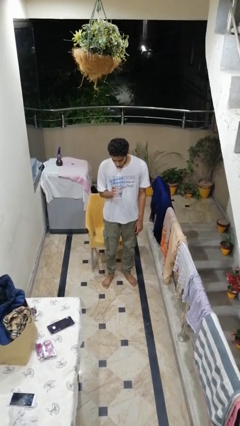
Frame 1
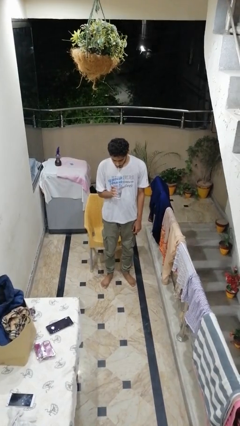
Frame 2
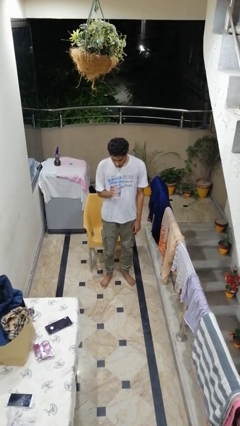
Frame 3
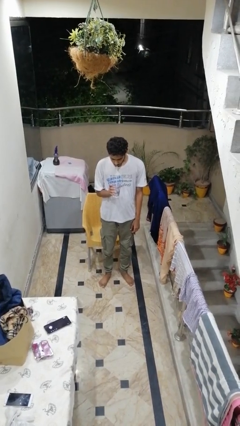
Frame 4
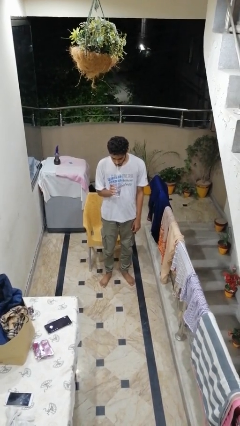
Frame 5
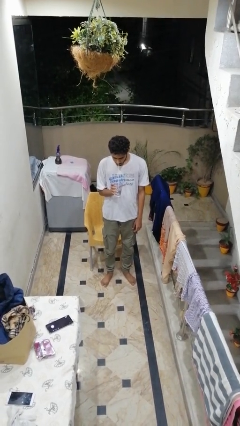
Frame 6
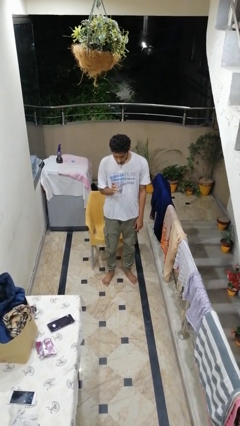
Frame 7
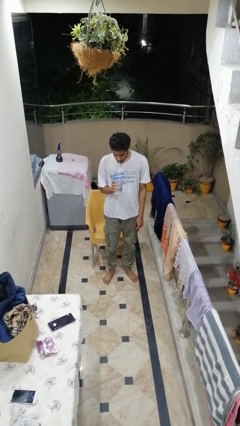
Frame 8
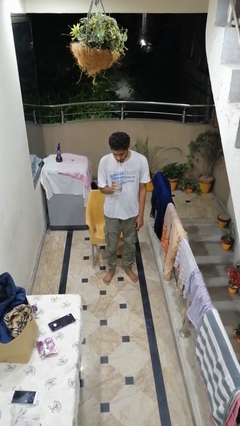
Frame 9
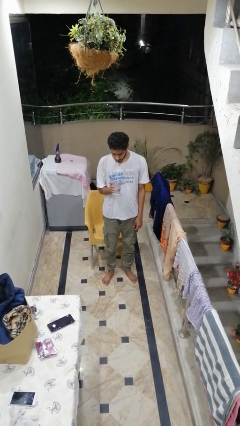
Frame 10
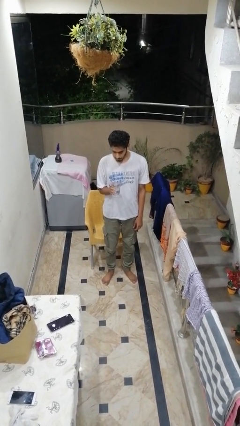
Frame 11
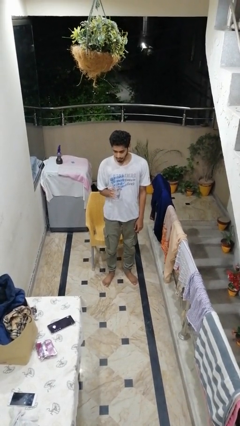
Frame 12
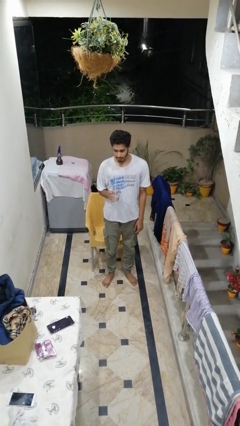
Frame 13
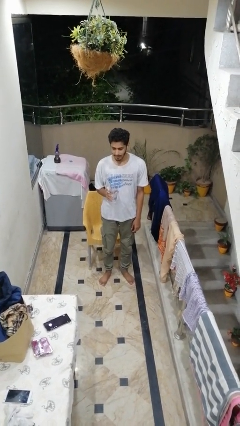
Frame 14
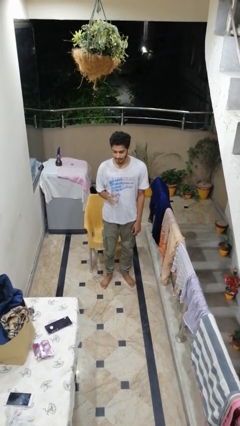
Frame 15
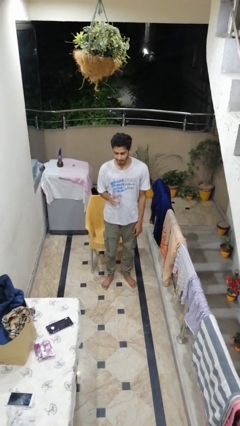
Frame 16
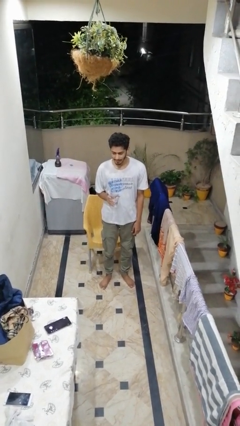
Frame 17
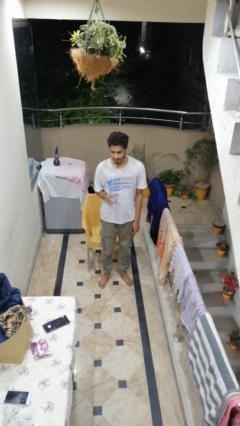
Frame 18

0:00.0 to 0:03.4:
person drinks from straw

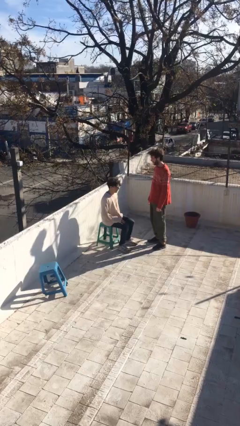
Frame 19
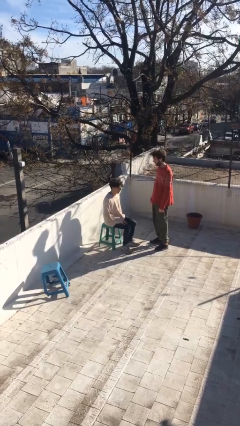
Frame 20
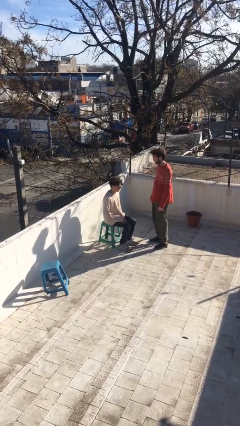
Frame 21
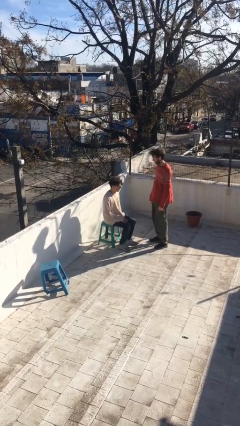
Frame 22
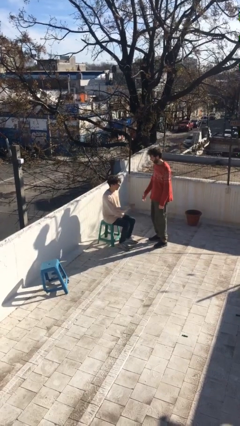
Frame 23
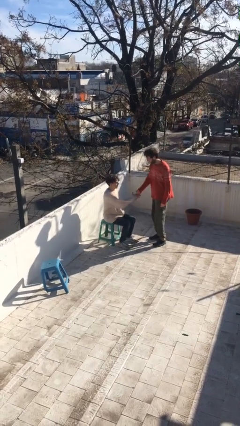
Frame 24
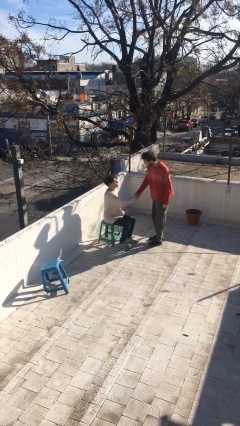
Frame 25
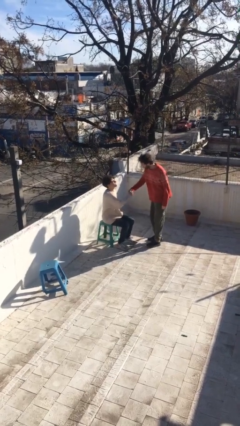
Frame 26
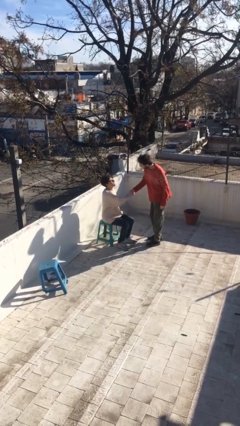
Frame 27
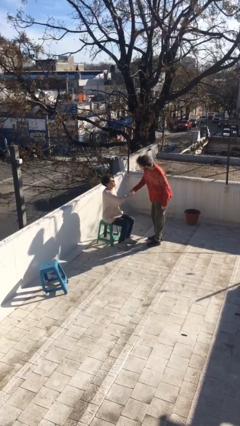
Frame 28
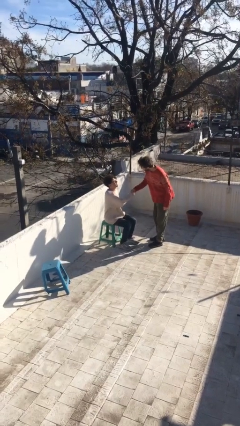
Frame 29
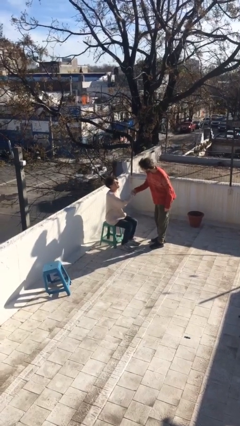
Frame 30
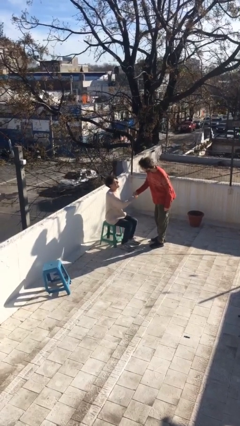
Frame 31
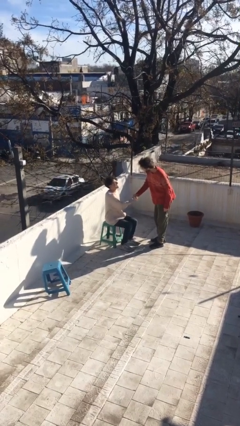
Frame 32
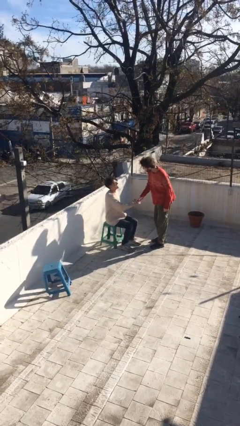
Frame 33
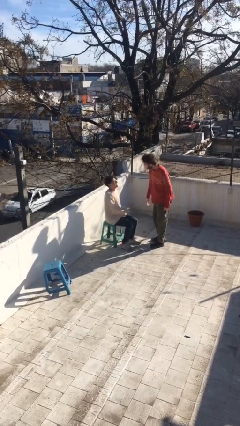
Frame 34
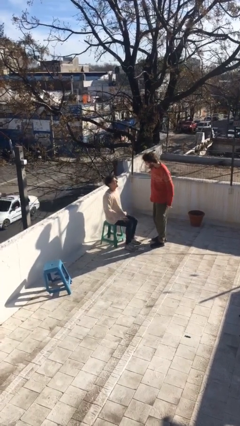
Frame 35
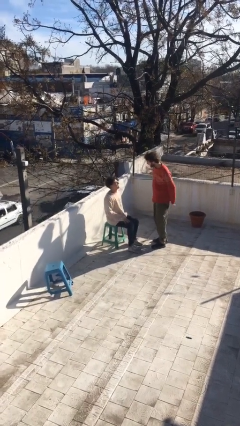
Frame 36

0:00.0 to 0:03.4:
person shakes hand

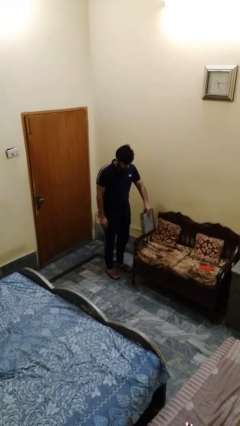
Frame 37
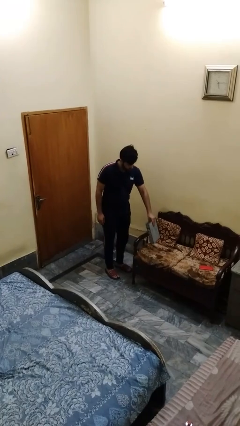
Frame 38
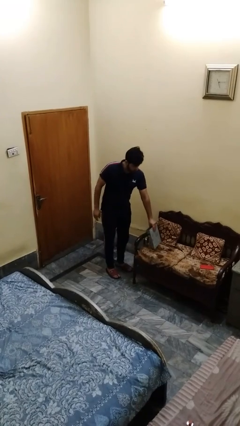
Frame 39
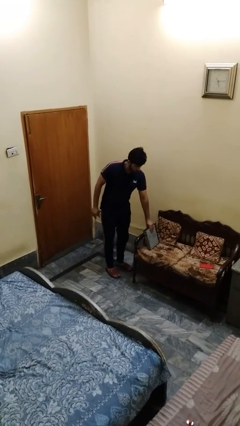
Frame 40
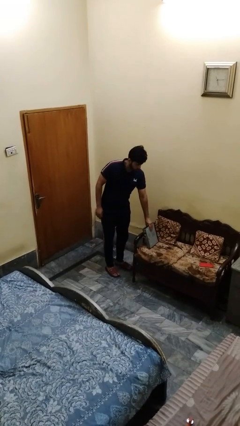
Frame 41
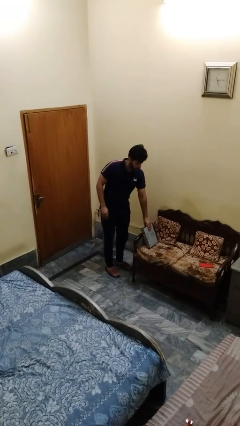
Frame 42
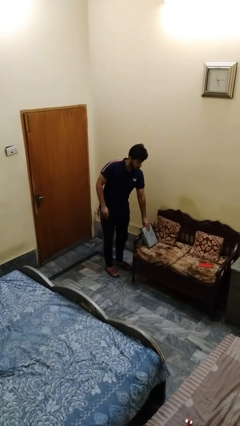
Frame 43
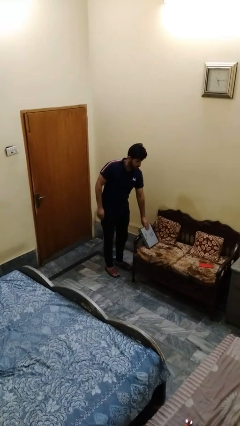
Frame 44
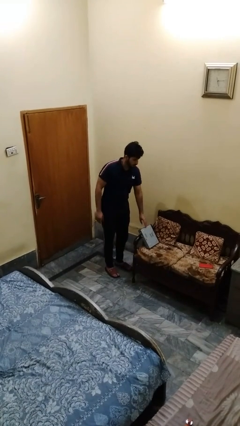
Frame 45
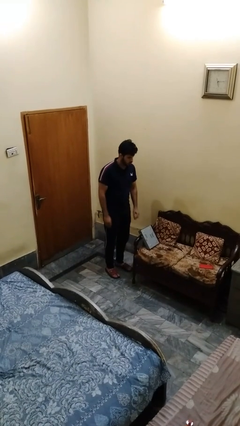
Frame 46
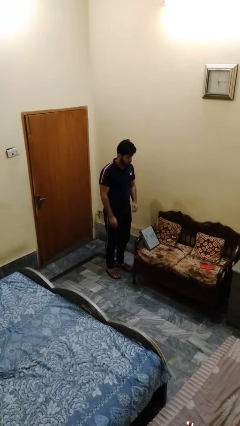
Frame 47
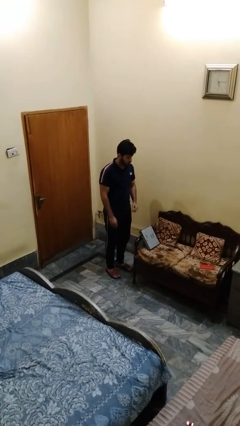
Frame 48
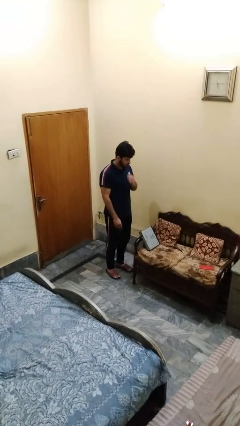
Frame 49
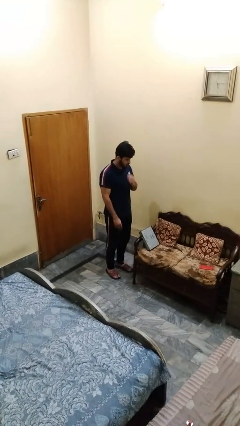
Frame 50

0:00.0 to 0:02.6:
person puts down object on couch

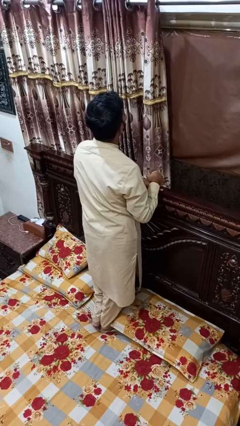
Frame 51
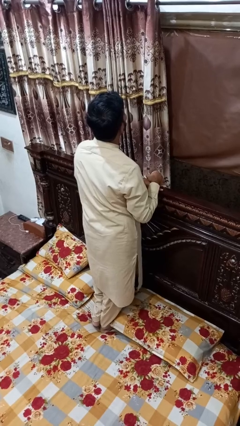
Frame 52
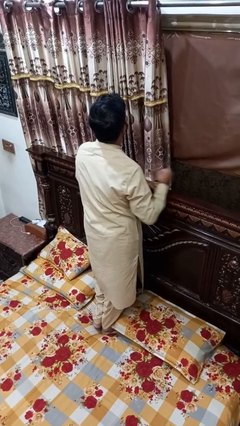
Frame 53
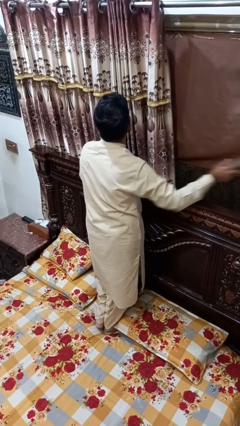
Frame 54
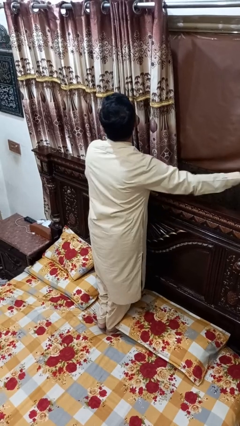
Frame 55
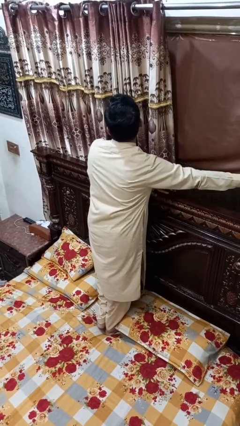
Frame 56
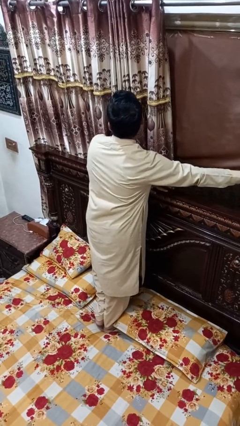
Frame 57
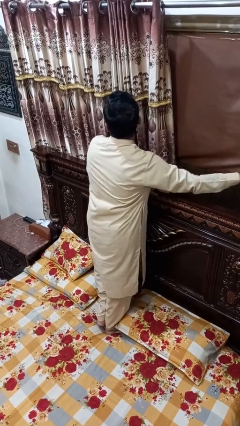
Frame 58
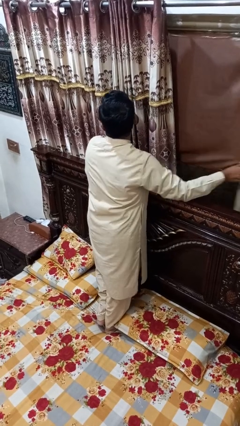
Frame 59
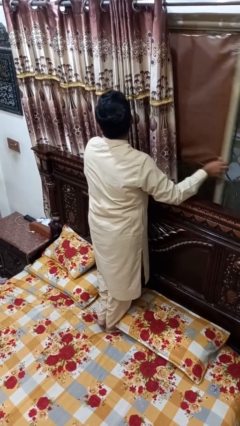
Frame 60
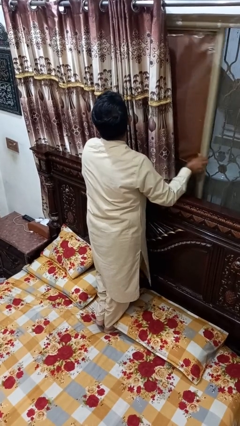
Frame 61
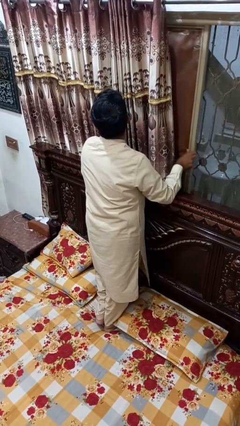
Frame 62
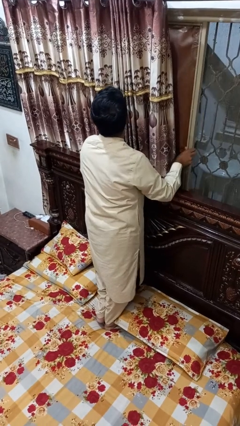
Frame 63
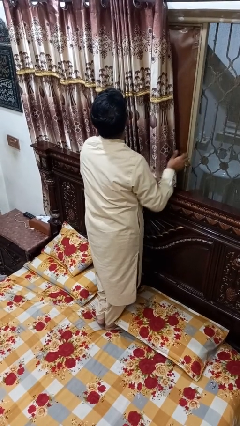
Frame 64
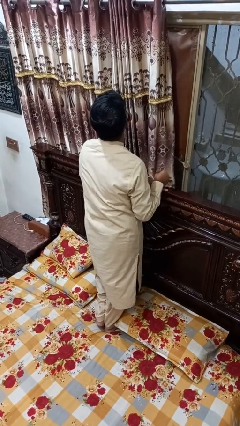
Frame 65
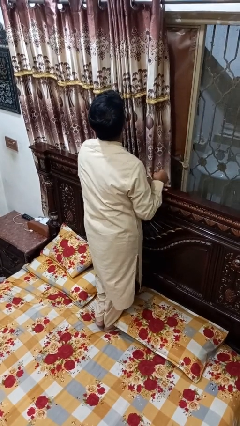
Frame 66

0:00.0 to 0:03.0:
person opens home window

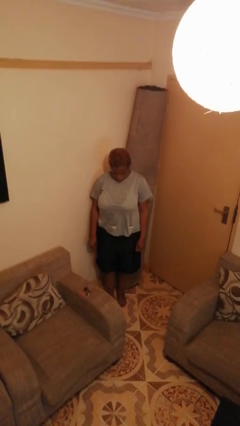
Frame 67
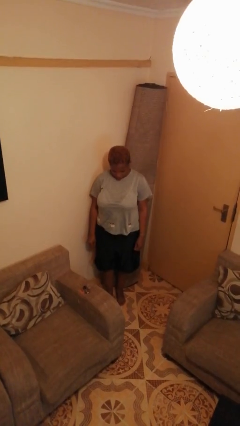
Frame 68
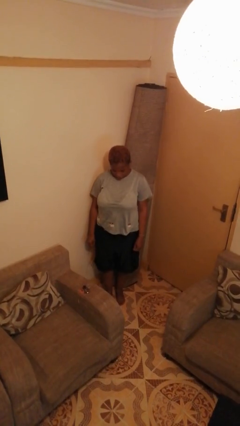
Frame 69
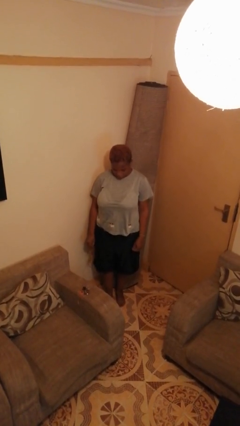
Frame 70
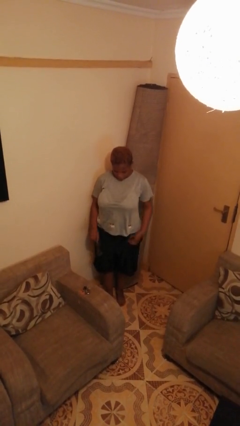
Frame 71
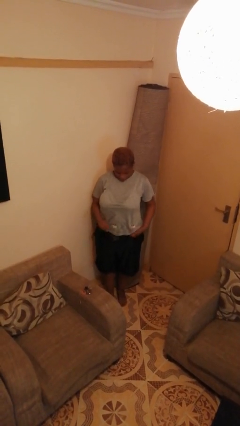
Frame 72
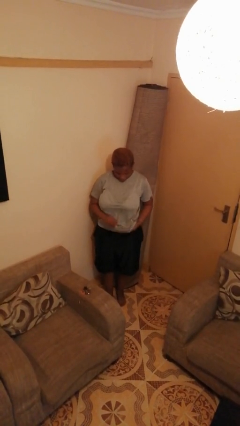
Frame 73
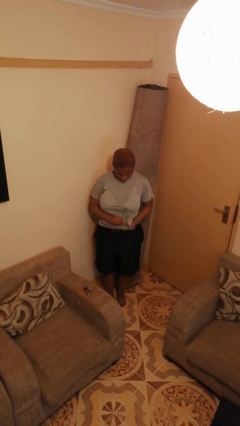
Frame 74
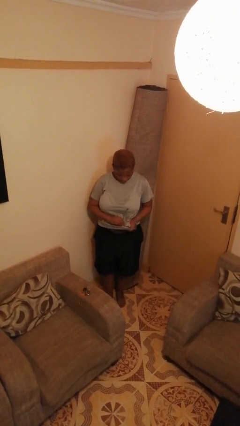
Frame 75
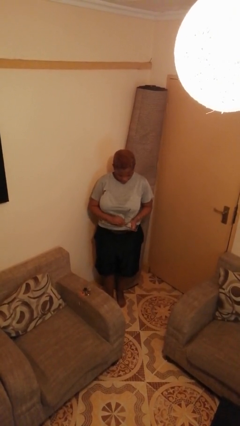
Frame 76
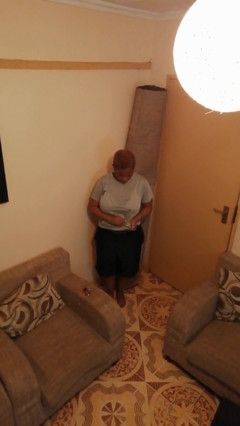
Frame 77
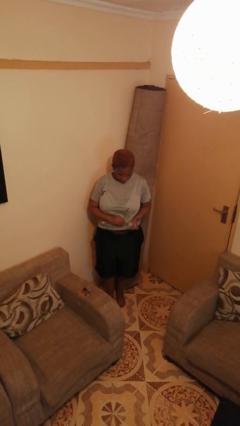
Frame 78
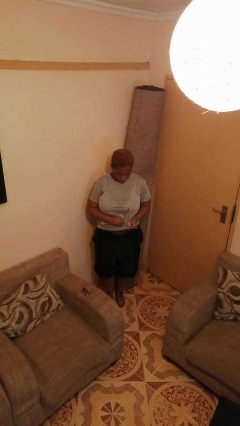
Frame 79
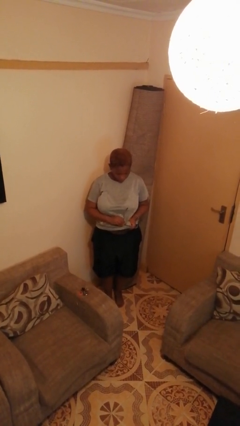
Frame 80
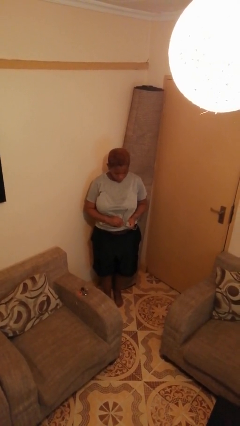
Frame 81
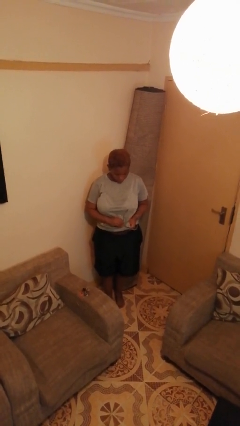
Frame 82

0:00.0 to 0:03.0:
person cleans eyeglasses

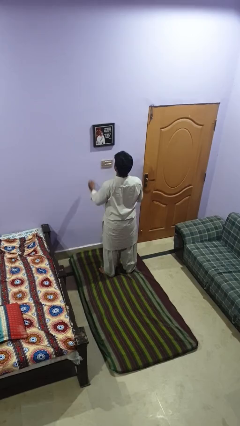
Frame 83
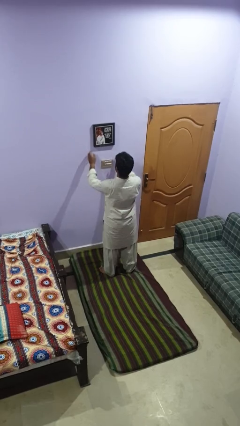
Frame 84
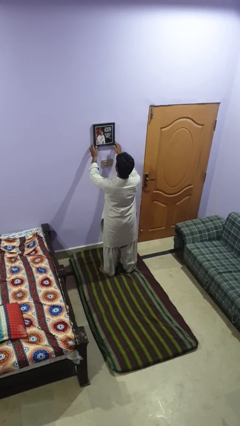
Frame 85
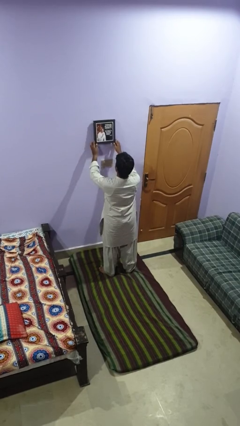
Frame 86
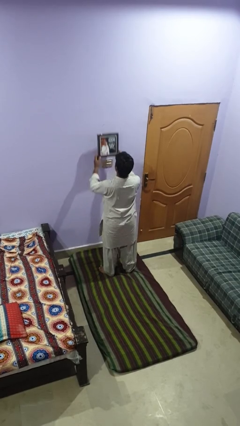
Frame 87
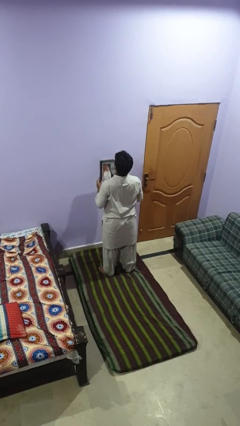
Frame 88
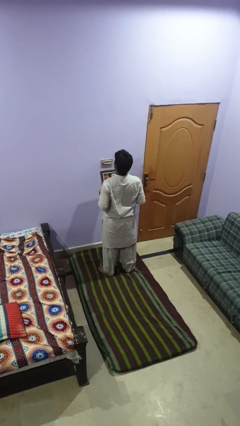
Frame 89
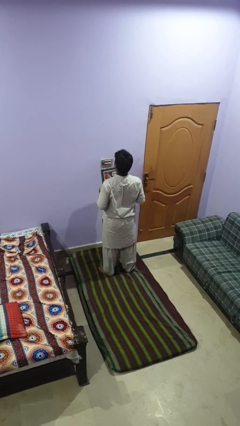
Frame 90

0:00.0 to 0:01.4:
person takes down picture frame

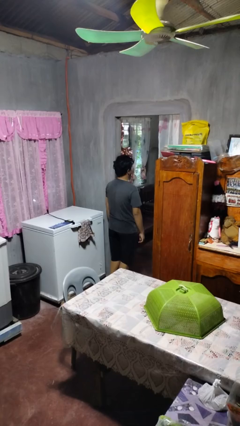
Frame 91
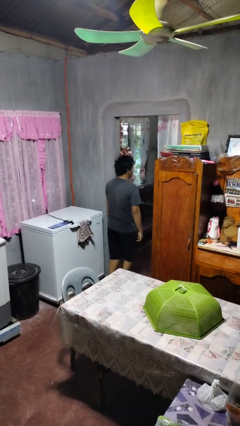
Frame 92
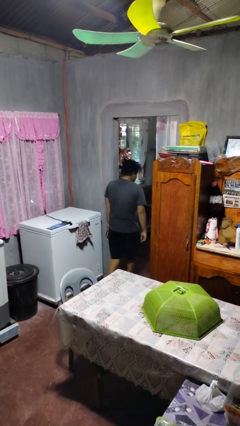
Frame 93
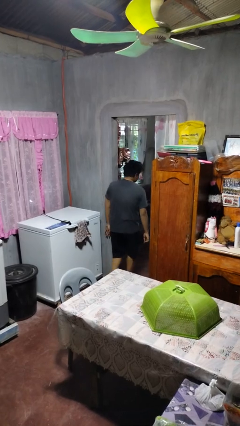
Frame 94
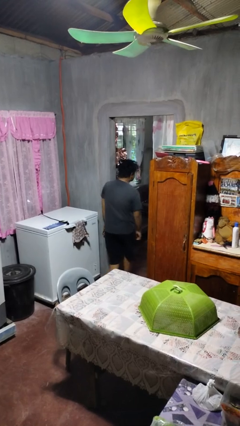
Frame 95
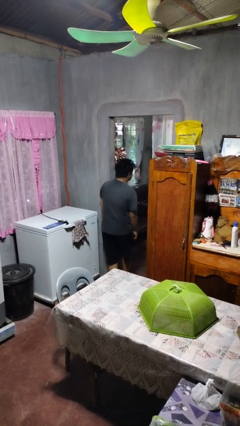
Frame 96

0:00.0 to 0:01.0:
person bumps into wall
